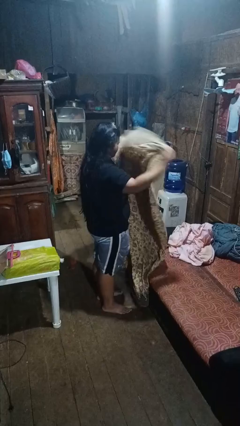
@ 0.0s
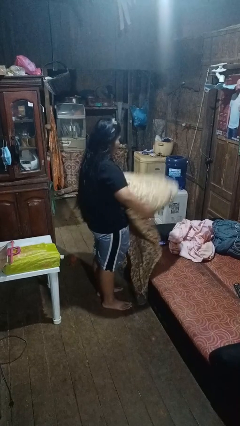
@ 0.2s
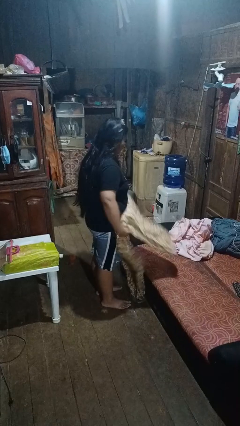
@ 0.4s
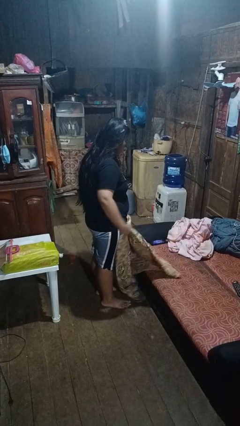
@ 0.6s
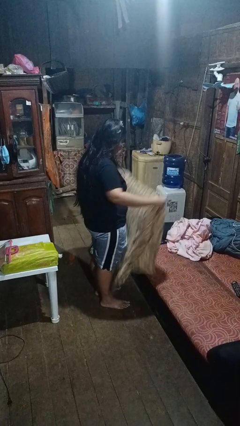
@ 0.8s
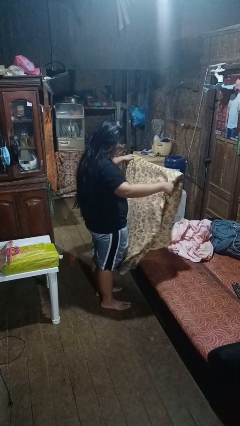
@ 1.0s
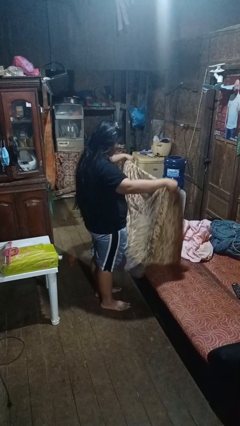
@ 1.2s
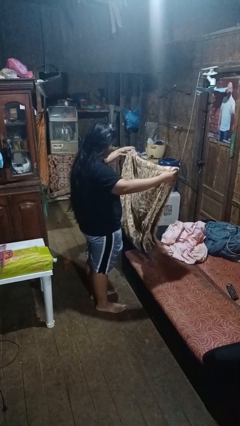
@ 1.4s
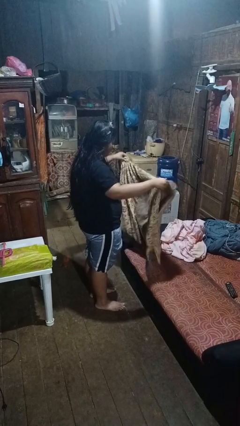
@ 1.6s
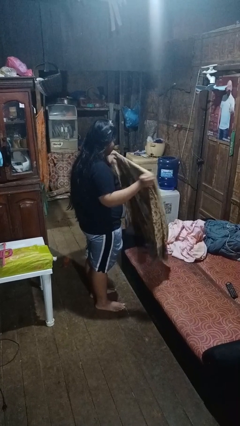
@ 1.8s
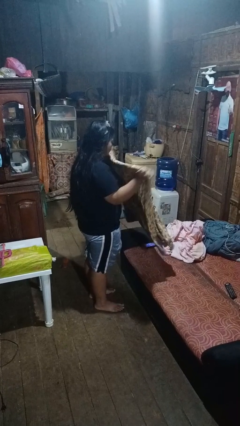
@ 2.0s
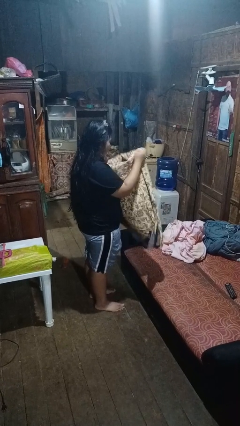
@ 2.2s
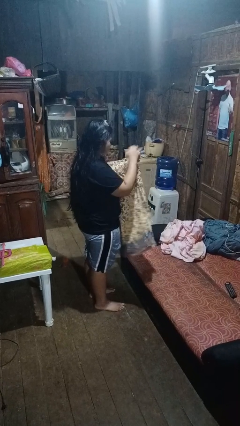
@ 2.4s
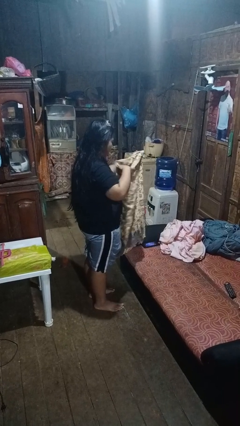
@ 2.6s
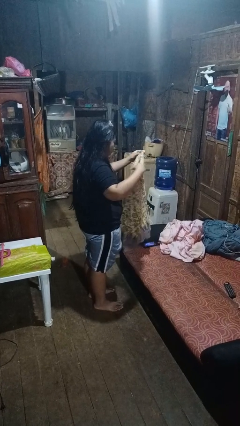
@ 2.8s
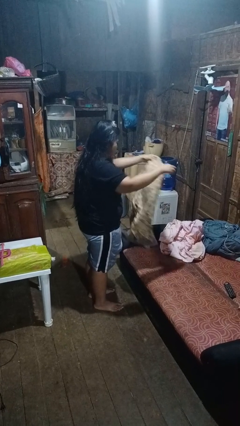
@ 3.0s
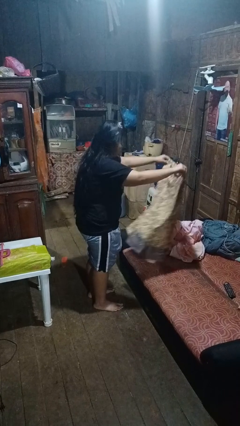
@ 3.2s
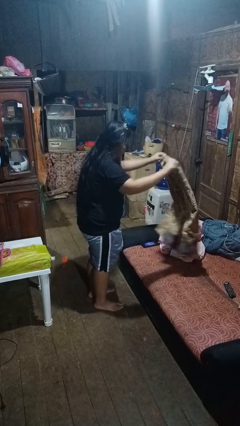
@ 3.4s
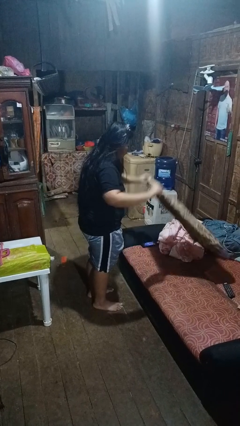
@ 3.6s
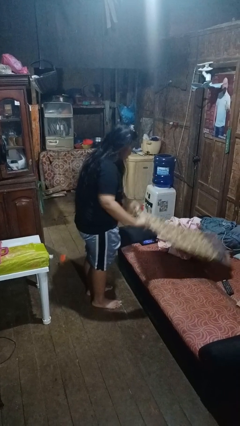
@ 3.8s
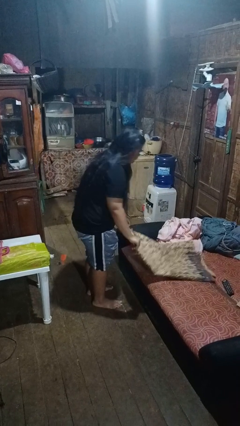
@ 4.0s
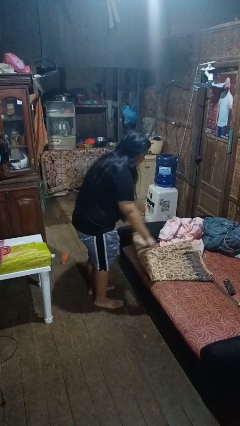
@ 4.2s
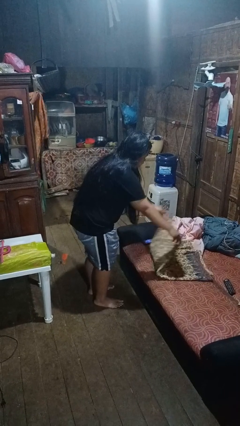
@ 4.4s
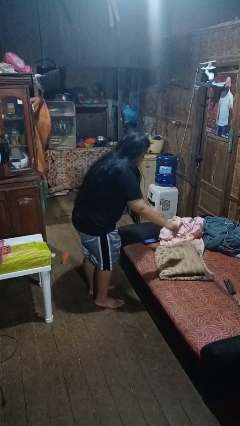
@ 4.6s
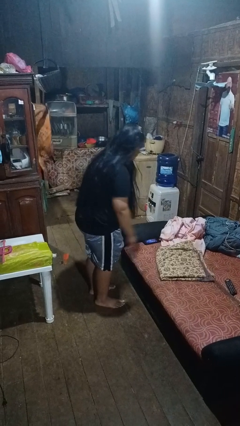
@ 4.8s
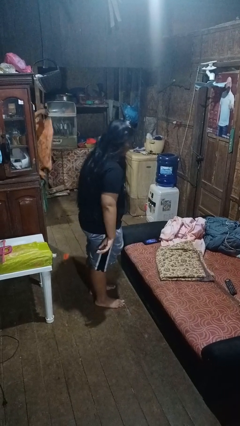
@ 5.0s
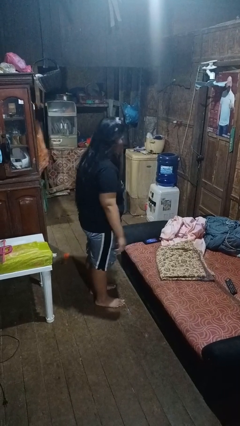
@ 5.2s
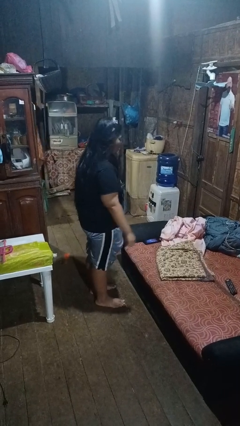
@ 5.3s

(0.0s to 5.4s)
person folds blanket

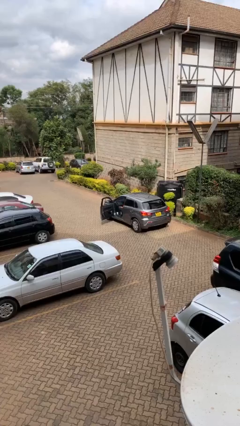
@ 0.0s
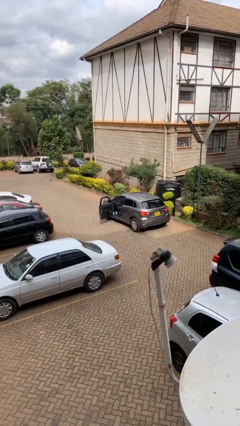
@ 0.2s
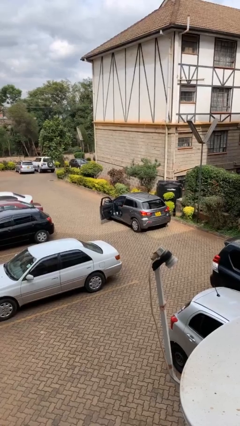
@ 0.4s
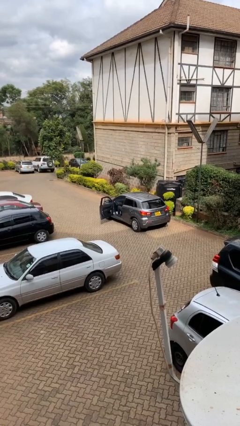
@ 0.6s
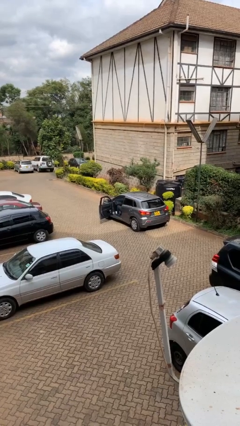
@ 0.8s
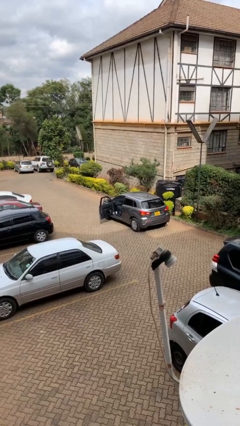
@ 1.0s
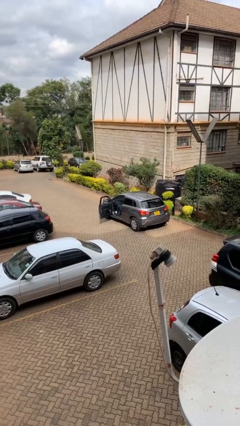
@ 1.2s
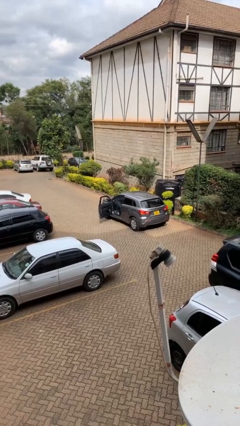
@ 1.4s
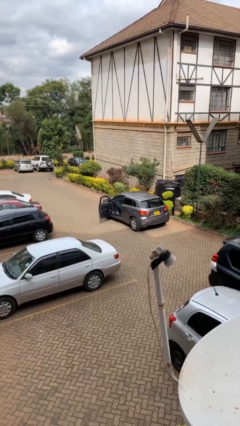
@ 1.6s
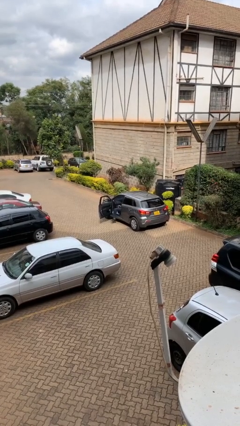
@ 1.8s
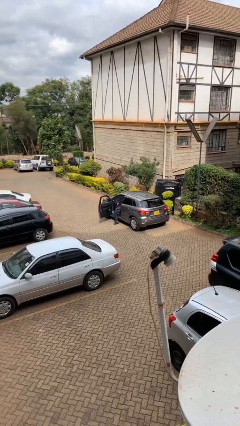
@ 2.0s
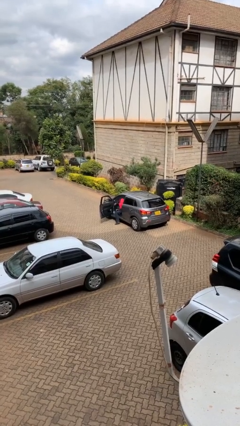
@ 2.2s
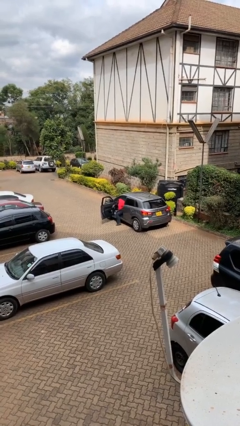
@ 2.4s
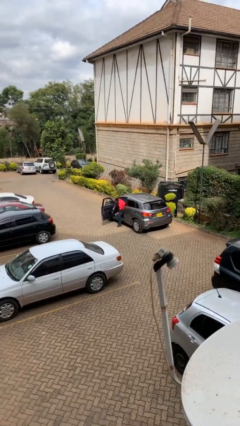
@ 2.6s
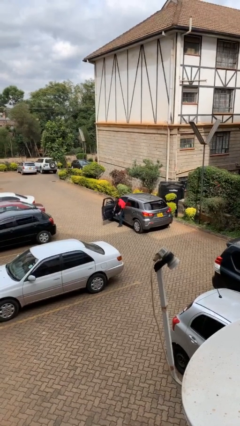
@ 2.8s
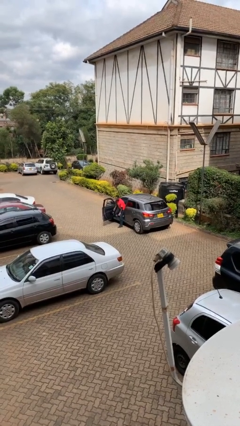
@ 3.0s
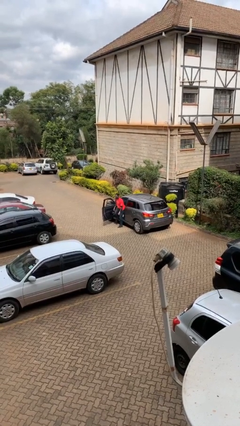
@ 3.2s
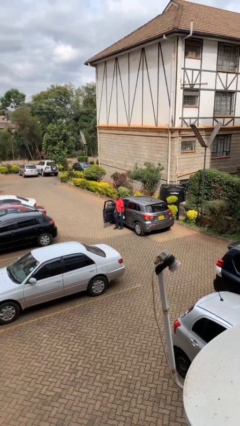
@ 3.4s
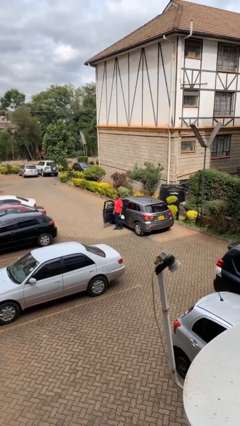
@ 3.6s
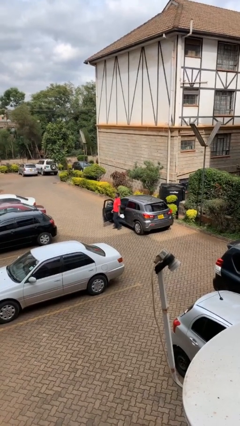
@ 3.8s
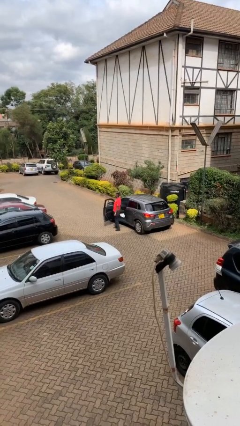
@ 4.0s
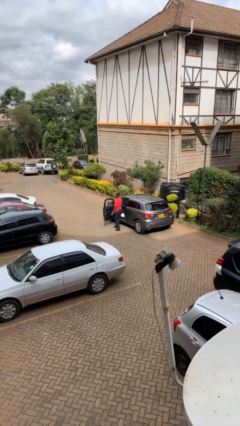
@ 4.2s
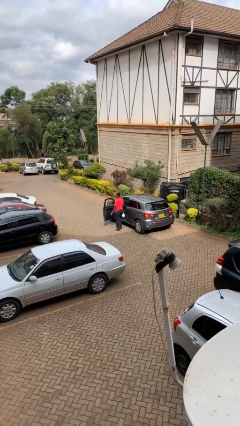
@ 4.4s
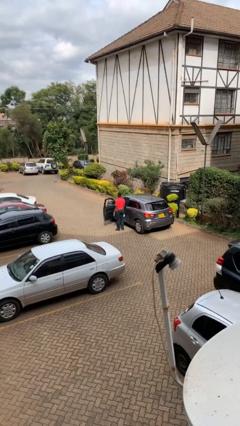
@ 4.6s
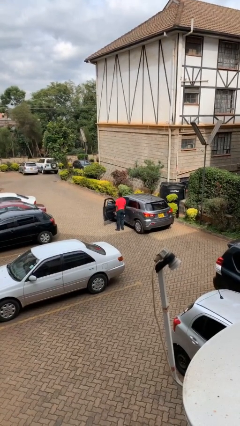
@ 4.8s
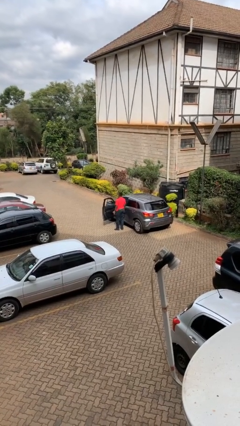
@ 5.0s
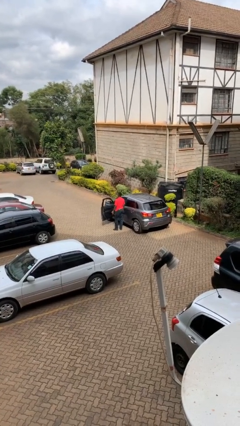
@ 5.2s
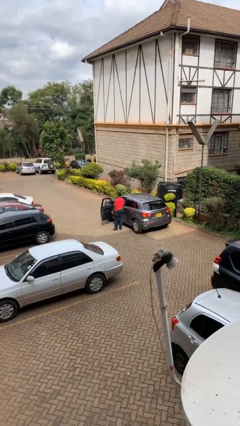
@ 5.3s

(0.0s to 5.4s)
person exits car

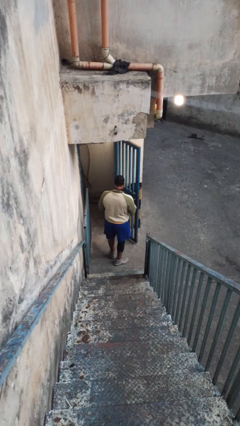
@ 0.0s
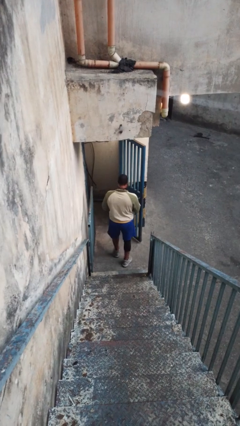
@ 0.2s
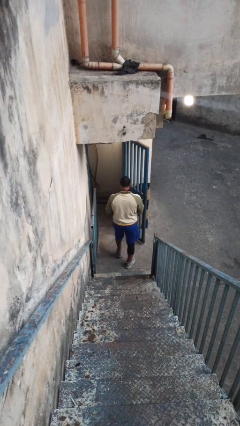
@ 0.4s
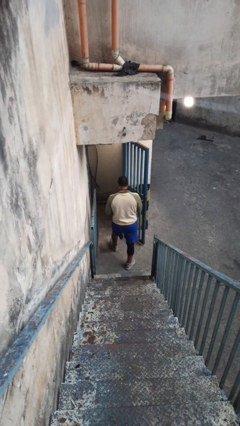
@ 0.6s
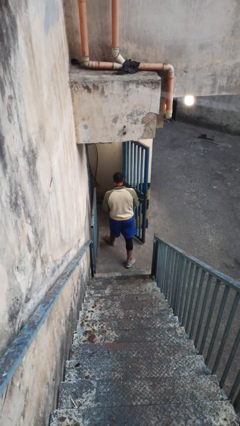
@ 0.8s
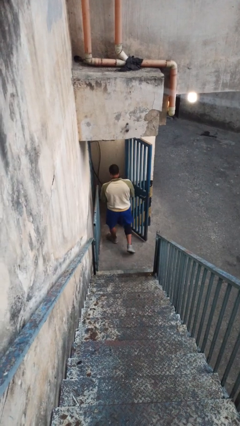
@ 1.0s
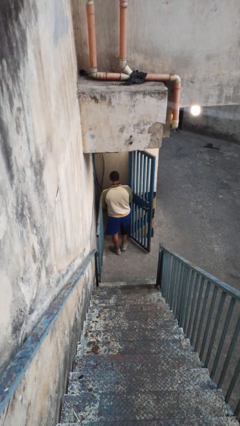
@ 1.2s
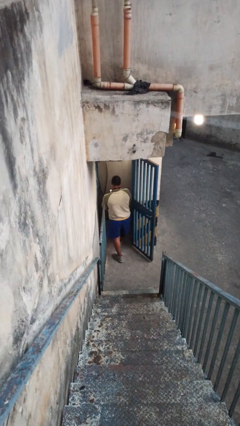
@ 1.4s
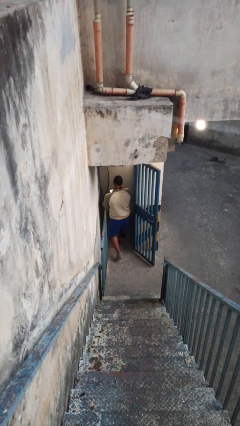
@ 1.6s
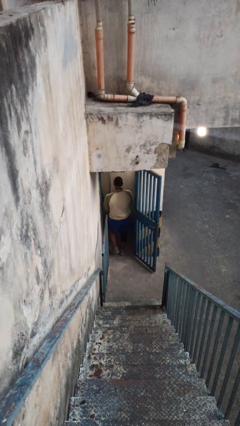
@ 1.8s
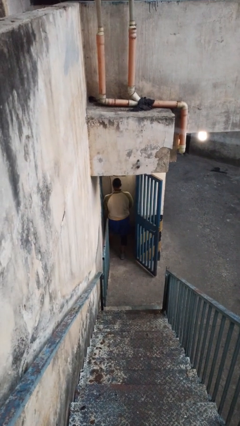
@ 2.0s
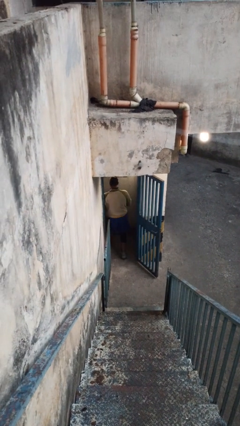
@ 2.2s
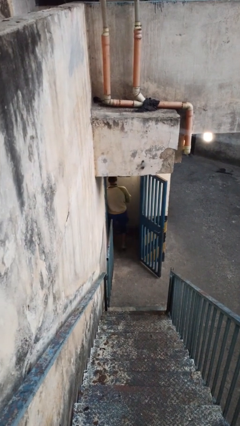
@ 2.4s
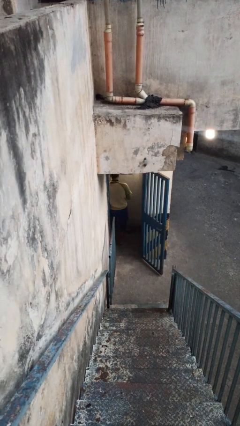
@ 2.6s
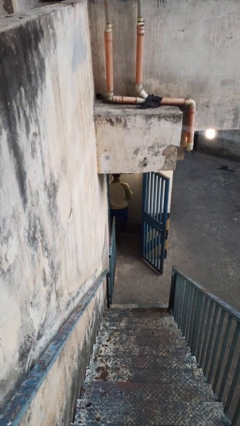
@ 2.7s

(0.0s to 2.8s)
person exits scene through structure

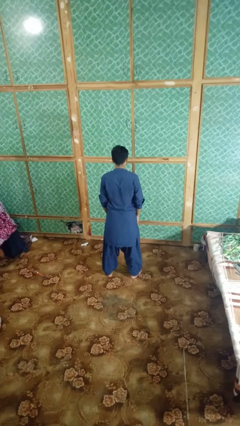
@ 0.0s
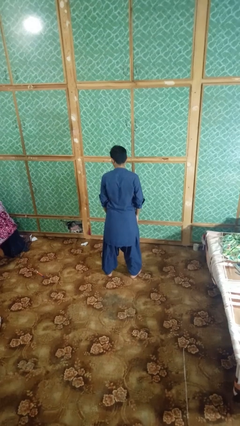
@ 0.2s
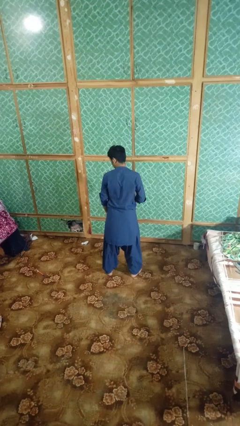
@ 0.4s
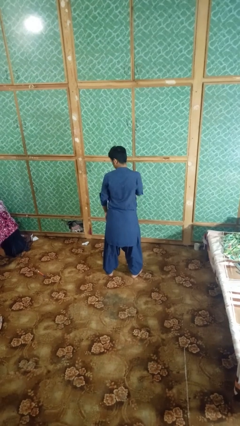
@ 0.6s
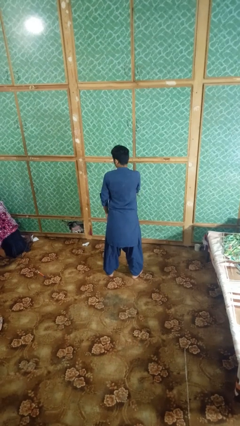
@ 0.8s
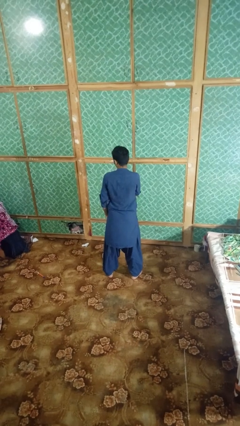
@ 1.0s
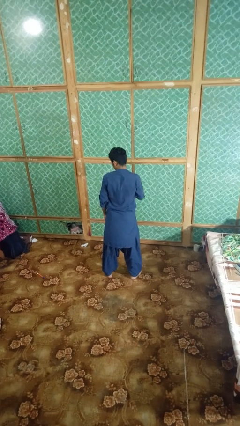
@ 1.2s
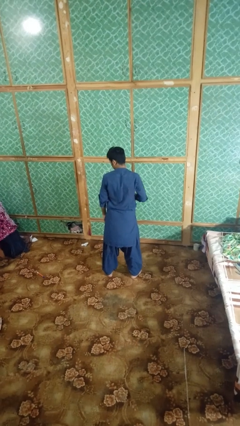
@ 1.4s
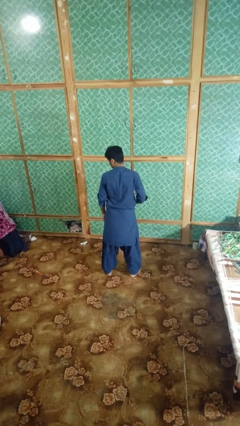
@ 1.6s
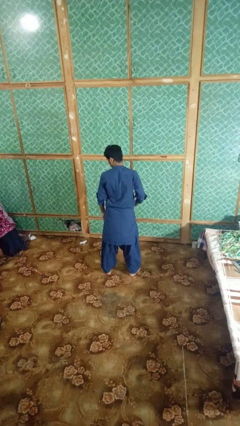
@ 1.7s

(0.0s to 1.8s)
person swats bug

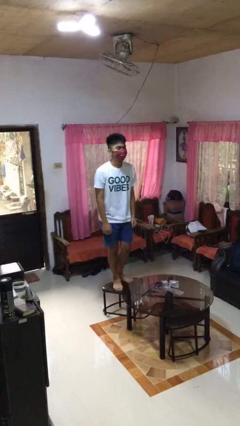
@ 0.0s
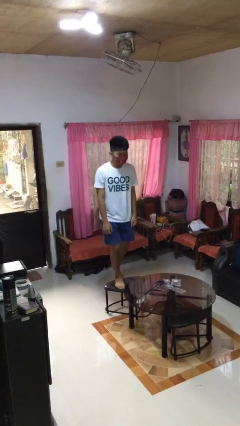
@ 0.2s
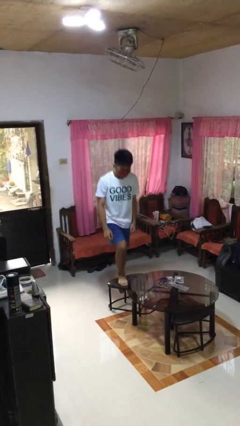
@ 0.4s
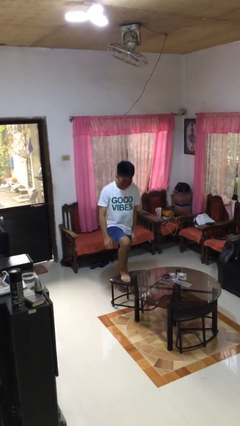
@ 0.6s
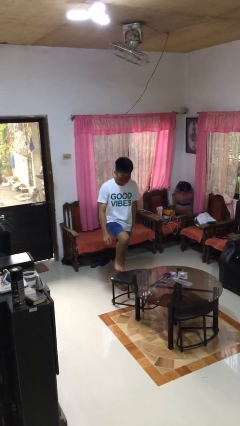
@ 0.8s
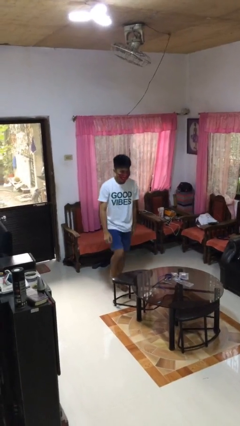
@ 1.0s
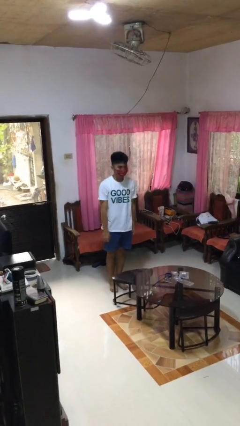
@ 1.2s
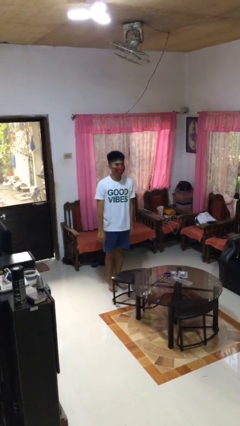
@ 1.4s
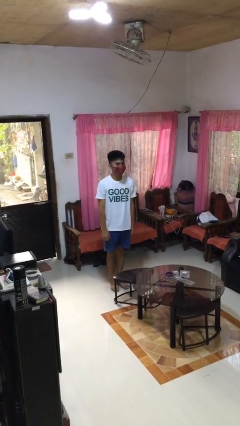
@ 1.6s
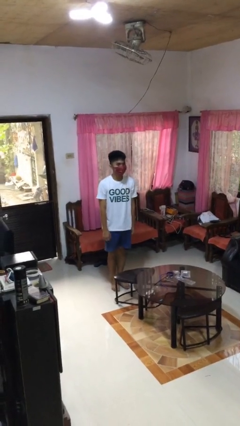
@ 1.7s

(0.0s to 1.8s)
person climbs off chair

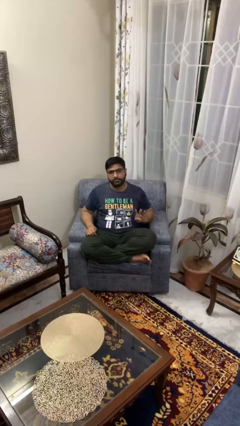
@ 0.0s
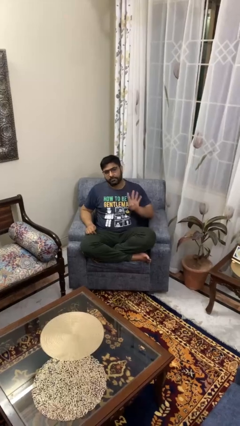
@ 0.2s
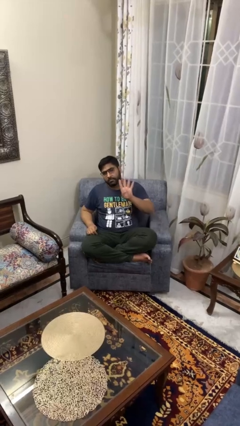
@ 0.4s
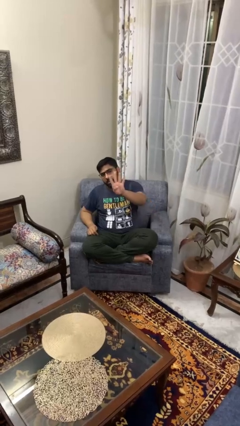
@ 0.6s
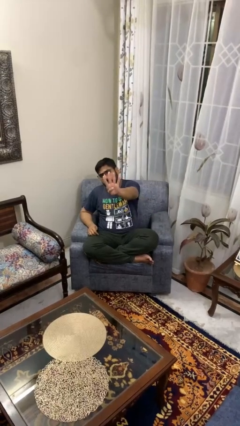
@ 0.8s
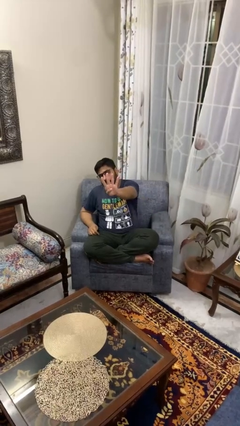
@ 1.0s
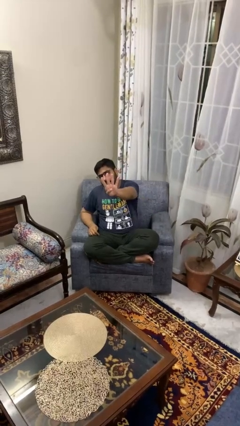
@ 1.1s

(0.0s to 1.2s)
person gestures number four
